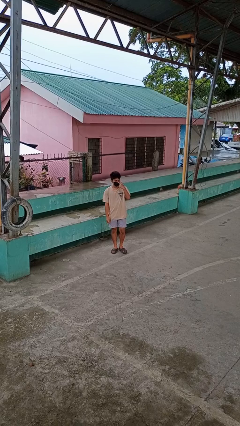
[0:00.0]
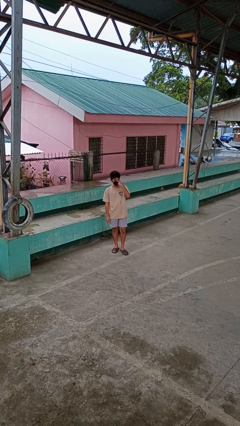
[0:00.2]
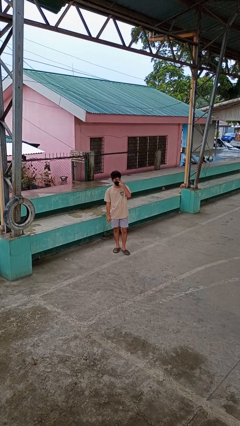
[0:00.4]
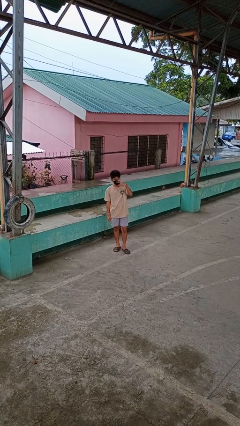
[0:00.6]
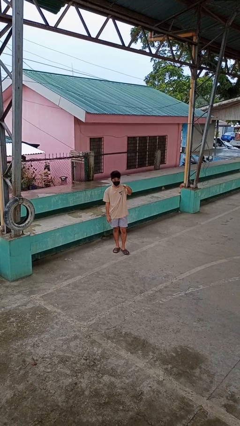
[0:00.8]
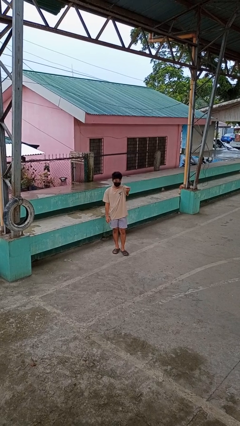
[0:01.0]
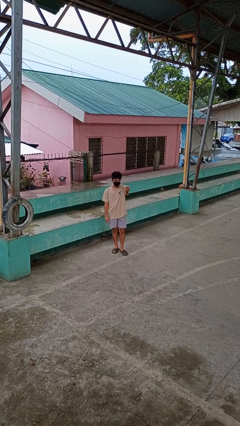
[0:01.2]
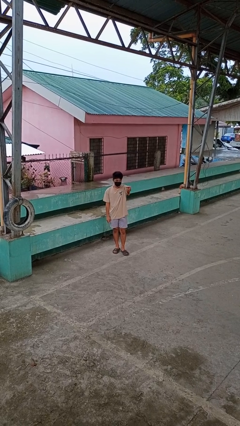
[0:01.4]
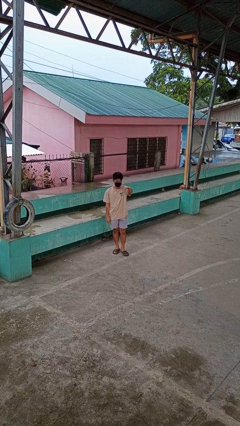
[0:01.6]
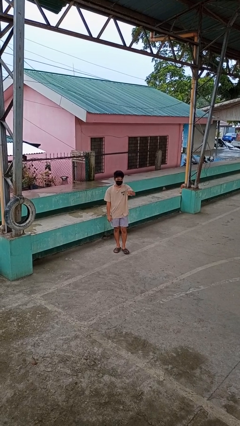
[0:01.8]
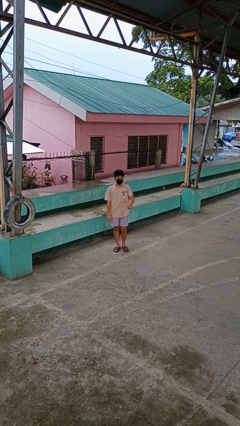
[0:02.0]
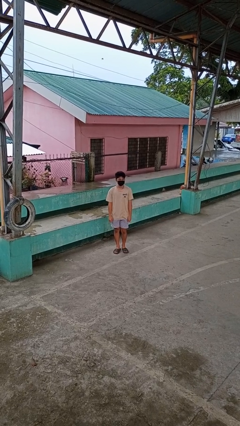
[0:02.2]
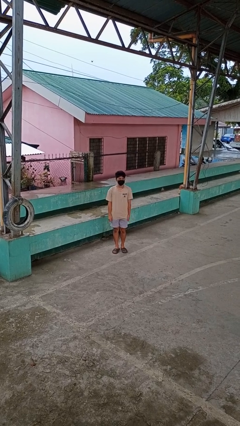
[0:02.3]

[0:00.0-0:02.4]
person gestures watch closely

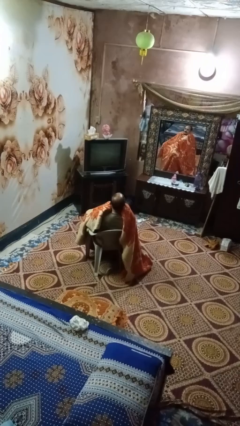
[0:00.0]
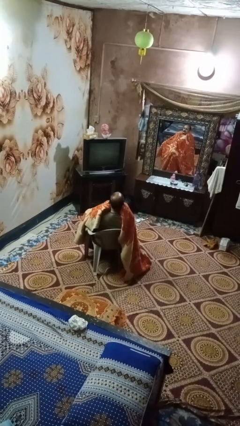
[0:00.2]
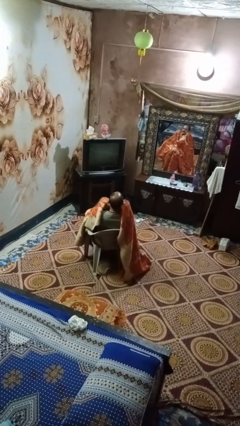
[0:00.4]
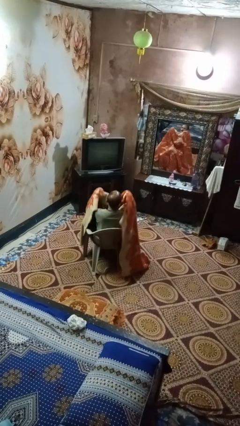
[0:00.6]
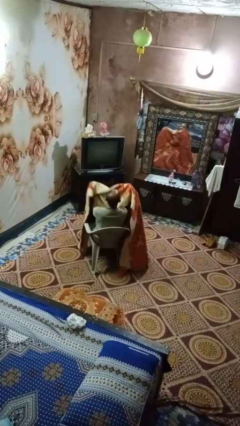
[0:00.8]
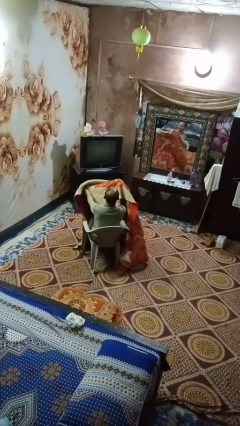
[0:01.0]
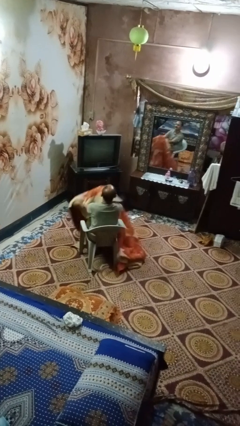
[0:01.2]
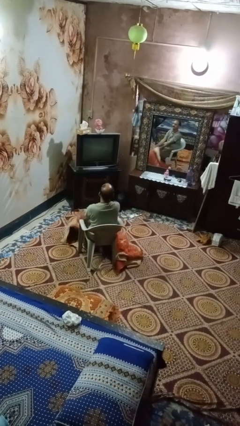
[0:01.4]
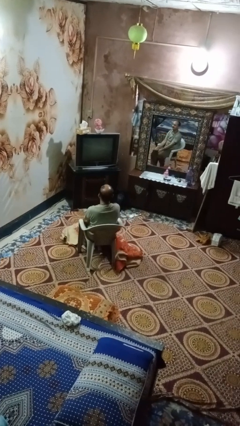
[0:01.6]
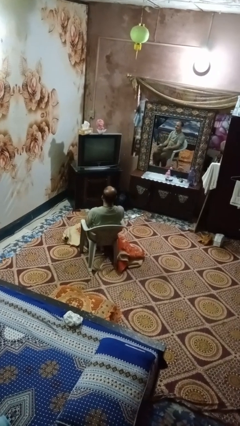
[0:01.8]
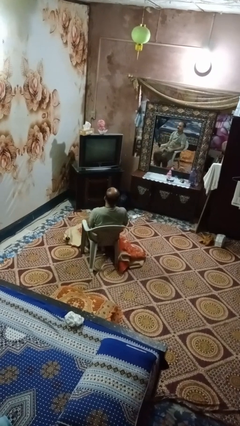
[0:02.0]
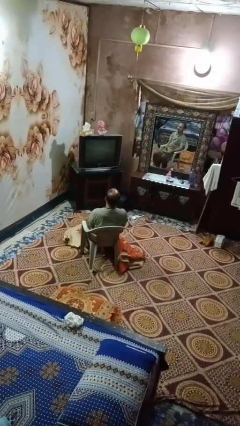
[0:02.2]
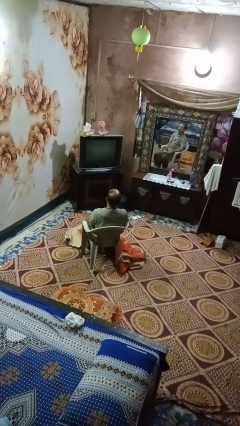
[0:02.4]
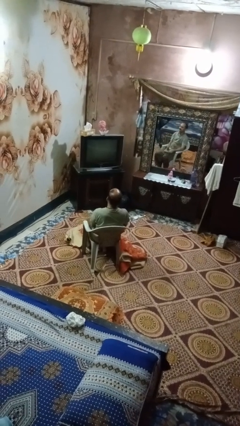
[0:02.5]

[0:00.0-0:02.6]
person uncovers with blanket

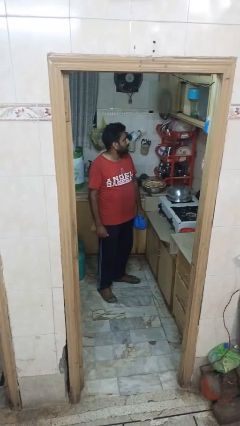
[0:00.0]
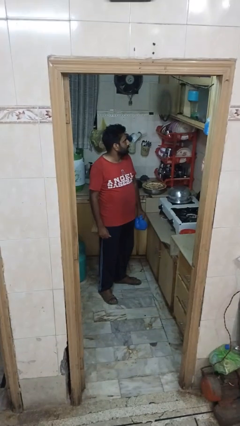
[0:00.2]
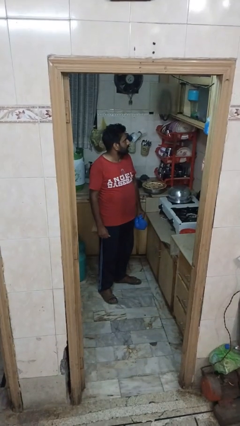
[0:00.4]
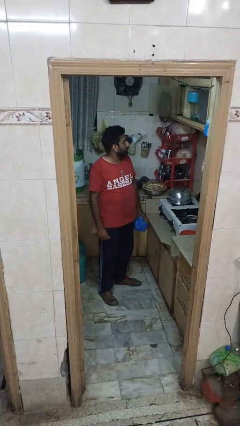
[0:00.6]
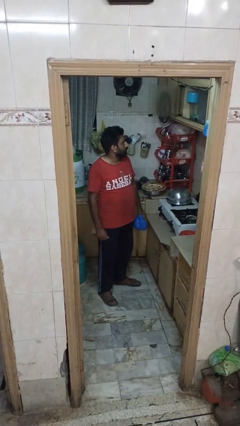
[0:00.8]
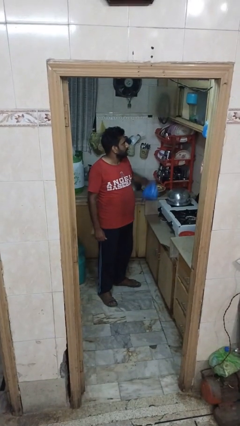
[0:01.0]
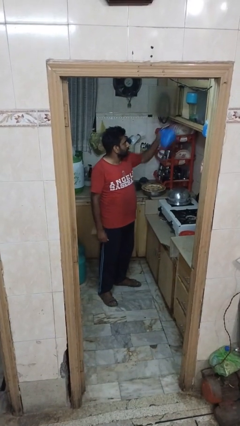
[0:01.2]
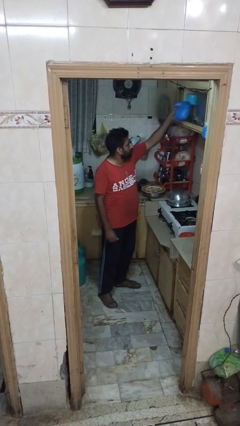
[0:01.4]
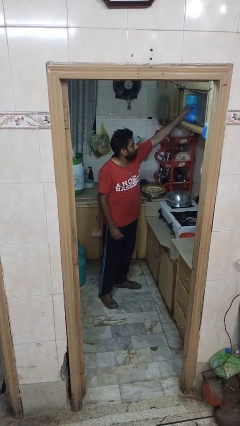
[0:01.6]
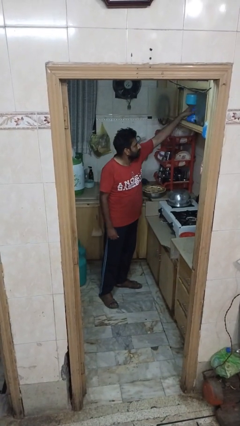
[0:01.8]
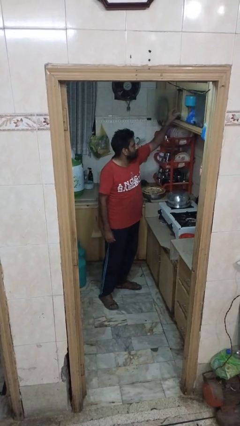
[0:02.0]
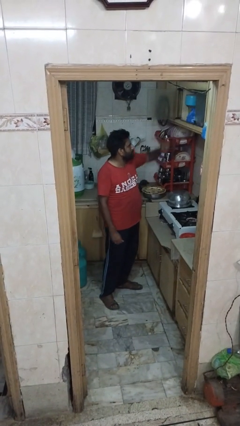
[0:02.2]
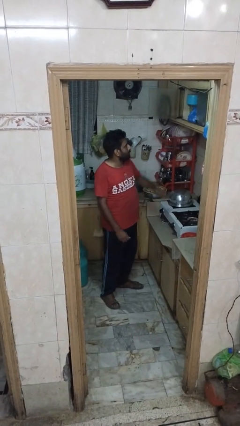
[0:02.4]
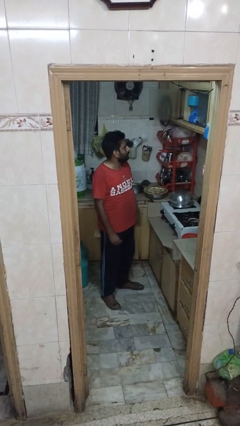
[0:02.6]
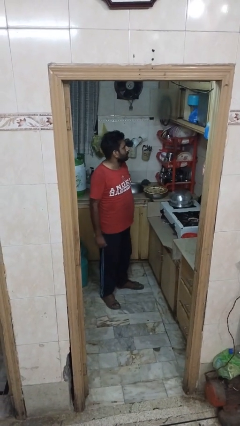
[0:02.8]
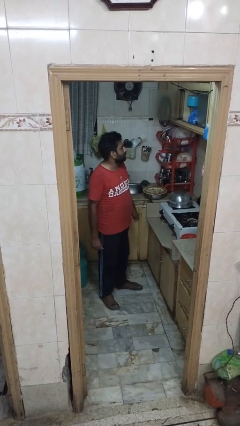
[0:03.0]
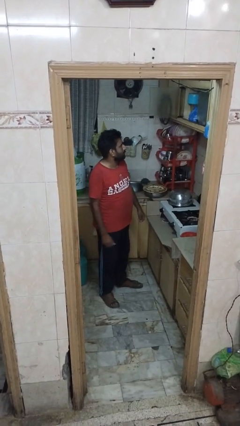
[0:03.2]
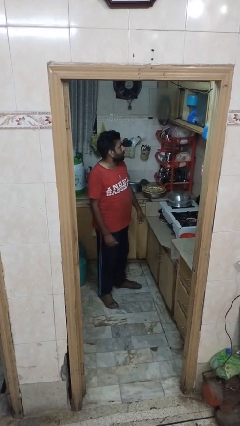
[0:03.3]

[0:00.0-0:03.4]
person loads groceries into cabinet

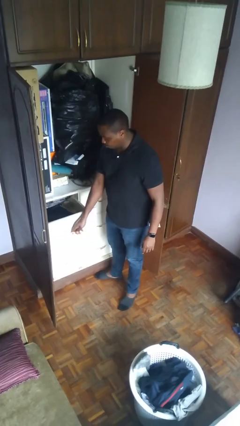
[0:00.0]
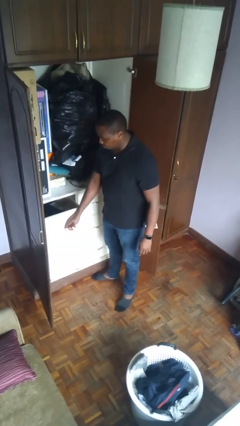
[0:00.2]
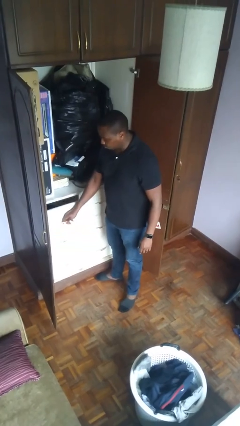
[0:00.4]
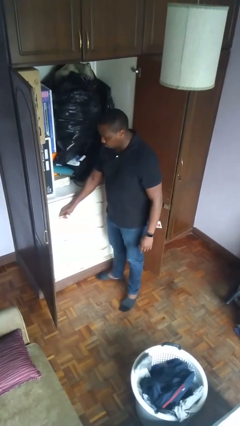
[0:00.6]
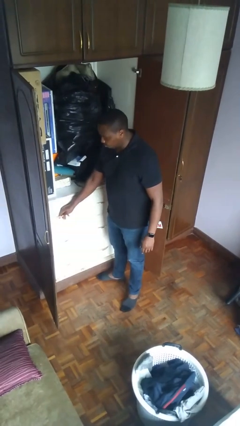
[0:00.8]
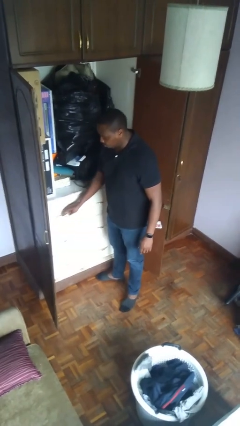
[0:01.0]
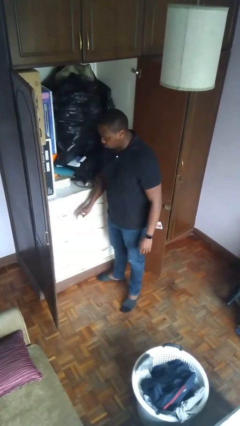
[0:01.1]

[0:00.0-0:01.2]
person closes dresser drawer

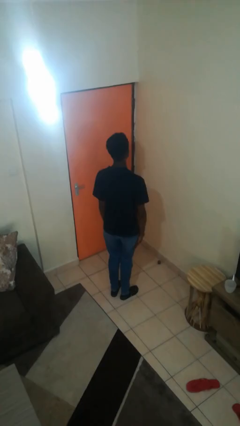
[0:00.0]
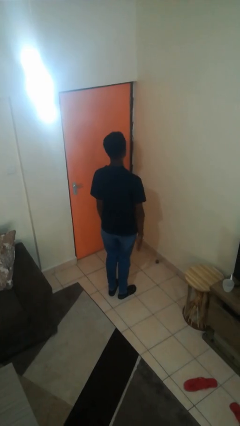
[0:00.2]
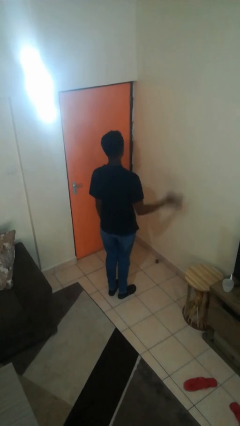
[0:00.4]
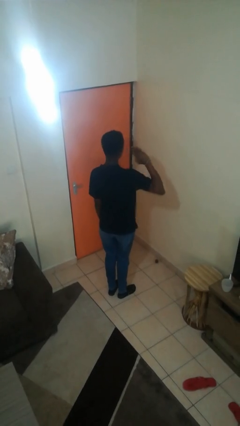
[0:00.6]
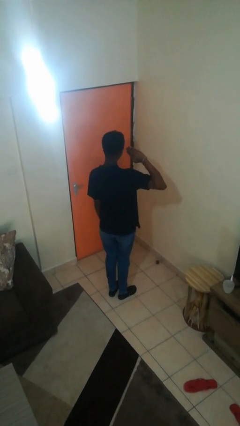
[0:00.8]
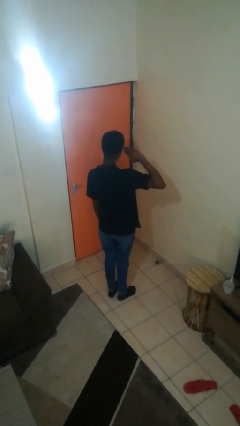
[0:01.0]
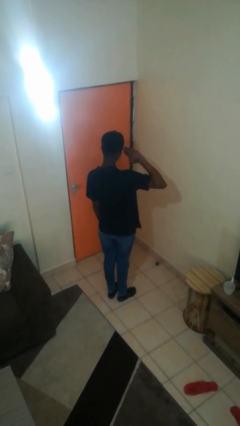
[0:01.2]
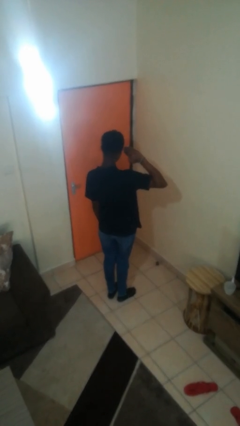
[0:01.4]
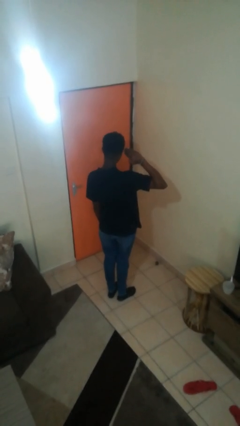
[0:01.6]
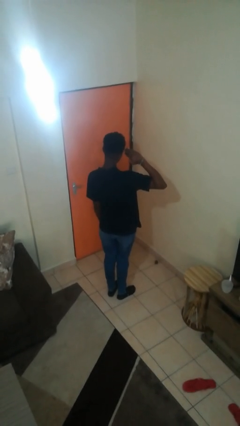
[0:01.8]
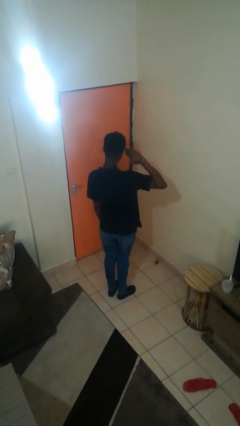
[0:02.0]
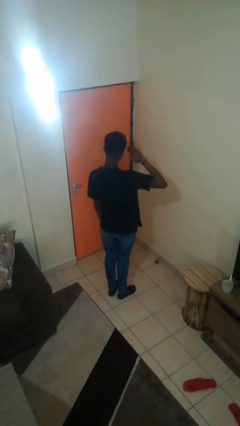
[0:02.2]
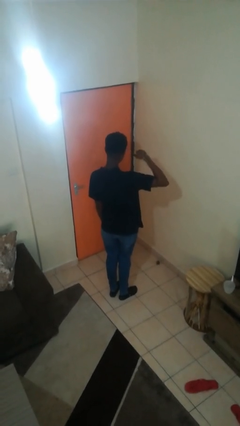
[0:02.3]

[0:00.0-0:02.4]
person salutes

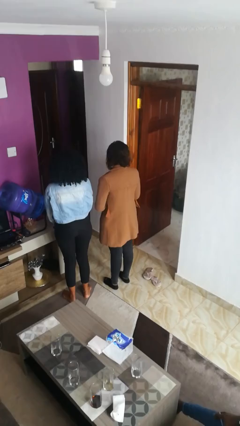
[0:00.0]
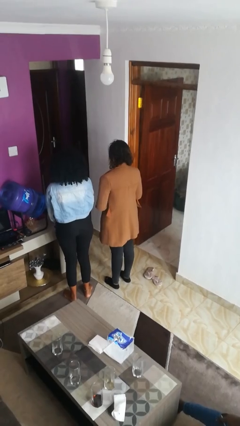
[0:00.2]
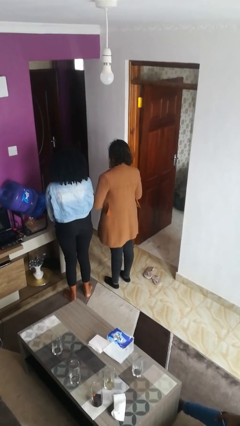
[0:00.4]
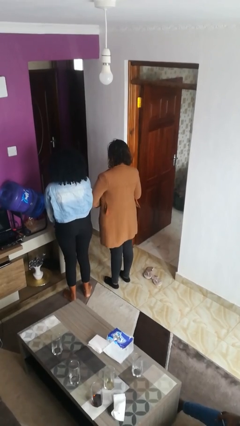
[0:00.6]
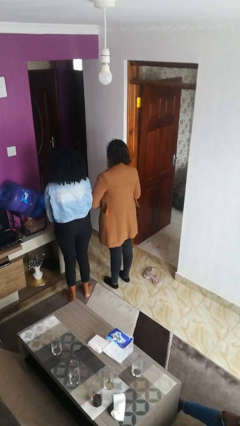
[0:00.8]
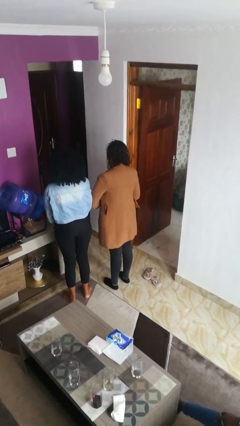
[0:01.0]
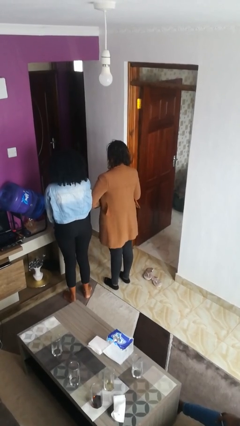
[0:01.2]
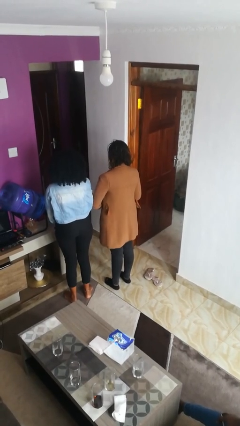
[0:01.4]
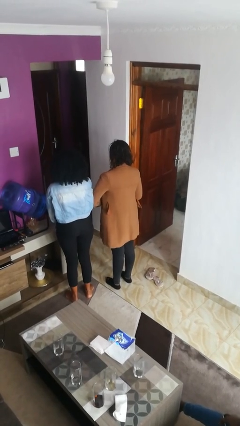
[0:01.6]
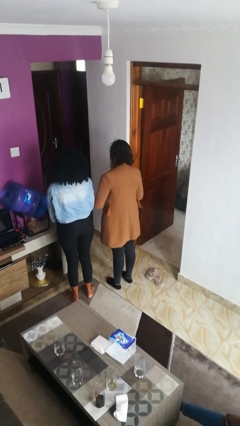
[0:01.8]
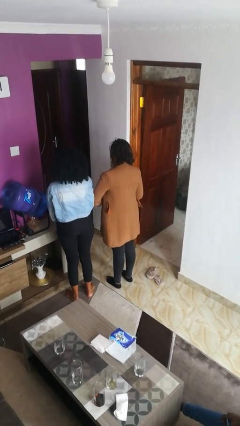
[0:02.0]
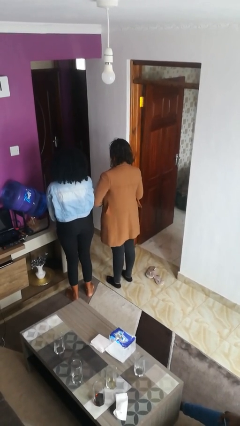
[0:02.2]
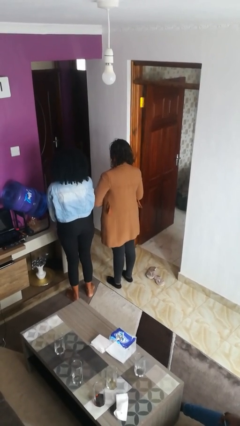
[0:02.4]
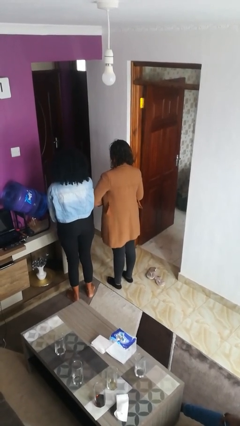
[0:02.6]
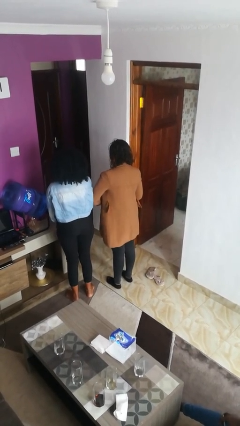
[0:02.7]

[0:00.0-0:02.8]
person nudges person with elbow

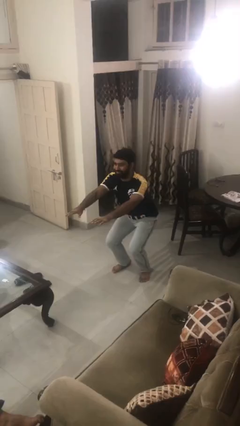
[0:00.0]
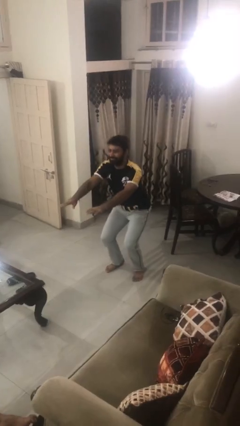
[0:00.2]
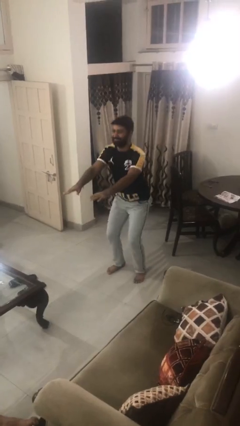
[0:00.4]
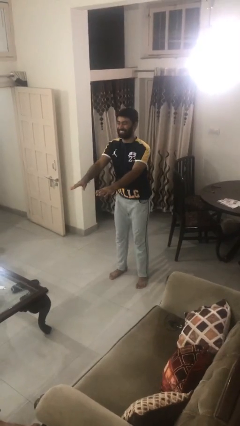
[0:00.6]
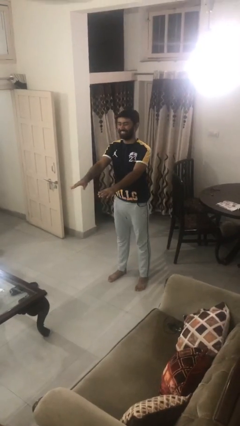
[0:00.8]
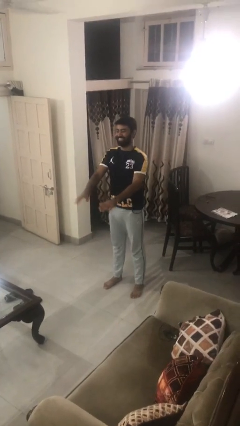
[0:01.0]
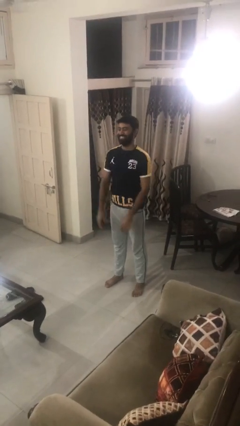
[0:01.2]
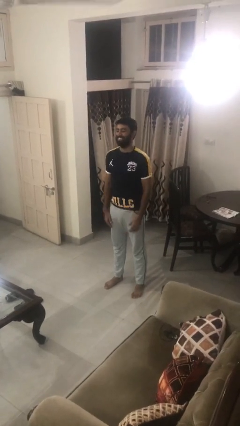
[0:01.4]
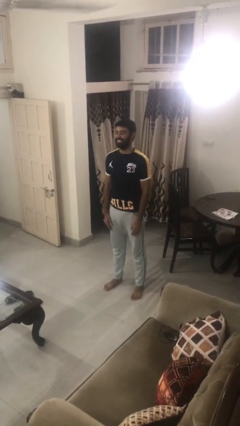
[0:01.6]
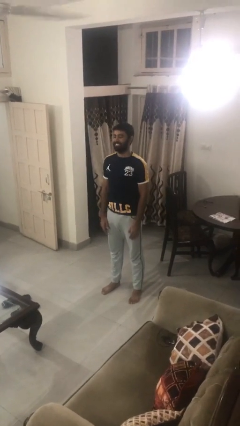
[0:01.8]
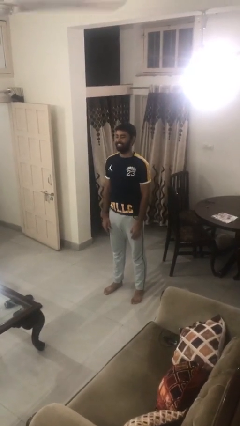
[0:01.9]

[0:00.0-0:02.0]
person stands up

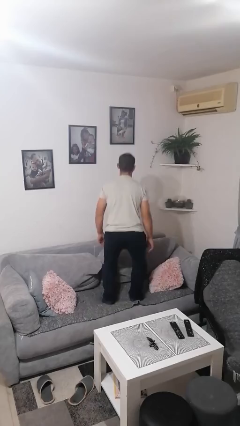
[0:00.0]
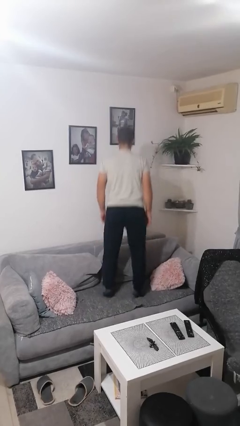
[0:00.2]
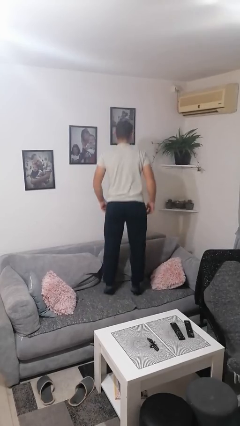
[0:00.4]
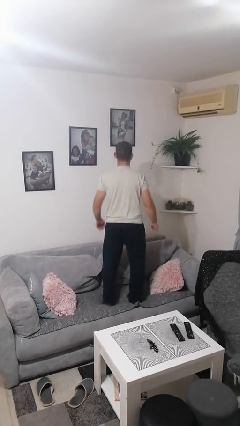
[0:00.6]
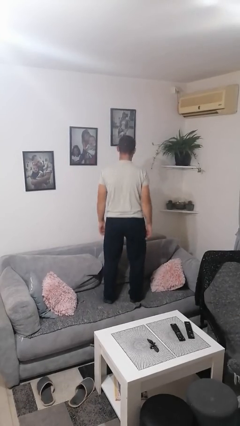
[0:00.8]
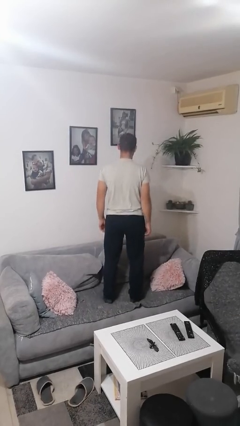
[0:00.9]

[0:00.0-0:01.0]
person jumps on couch
